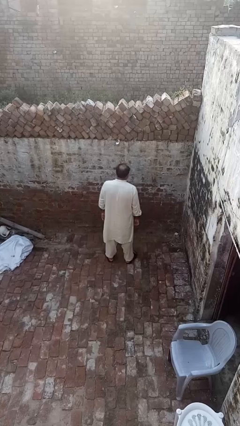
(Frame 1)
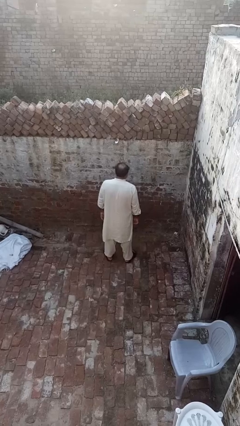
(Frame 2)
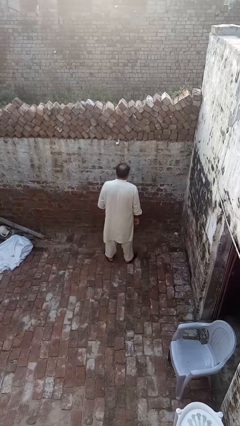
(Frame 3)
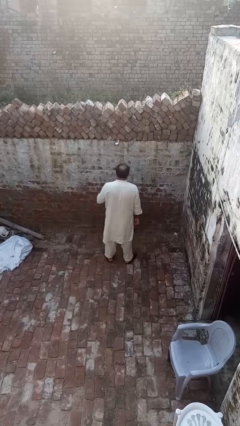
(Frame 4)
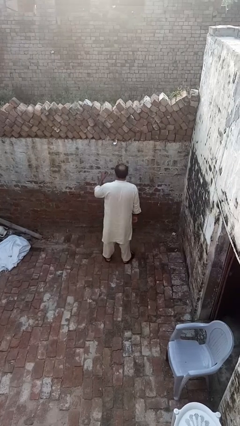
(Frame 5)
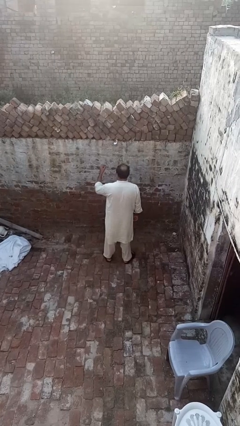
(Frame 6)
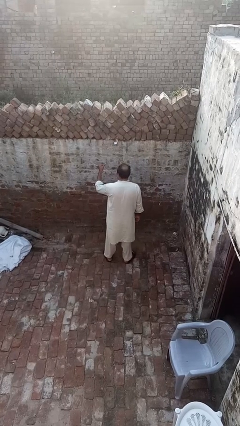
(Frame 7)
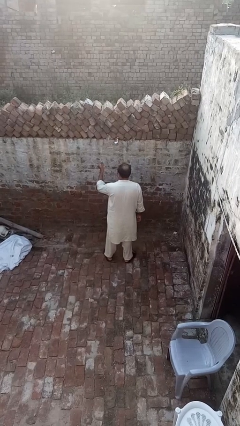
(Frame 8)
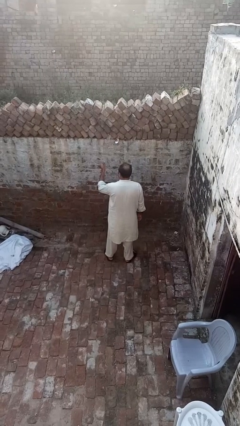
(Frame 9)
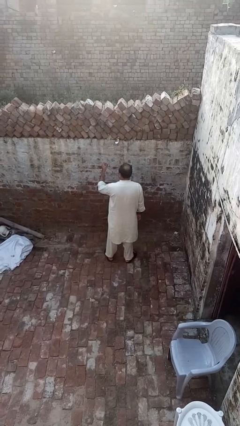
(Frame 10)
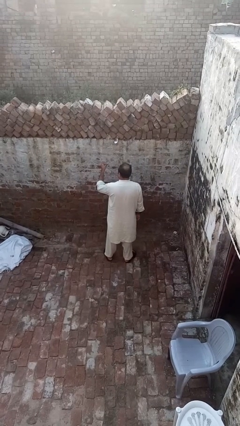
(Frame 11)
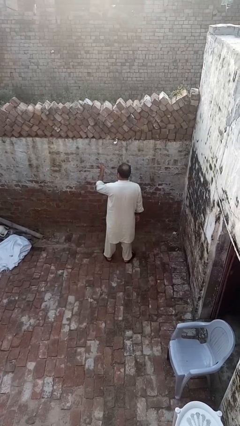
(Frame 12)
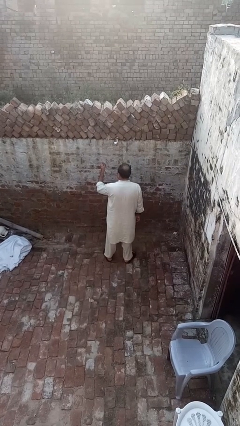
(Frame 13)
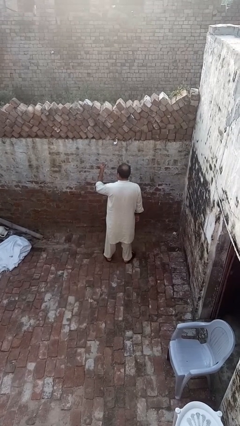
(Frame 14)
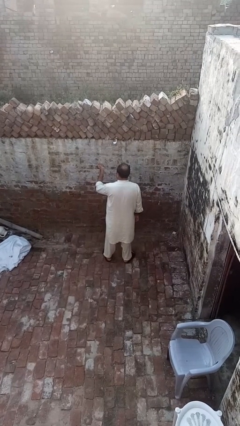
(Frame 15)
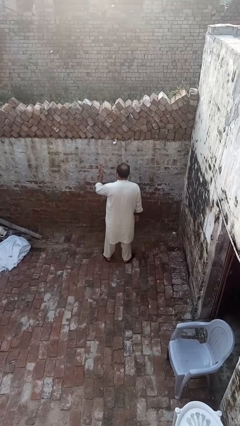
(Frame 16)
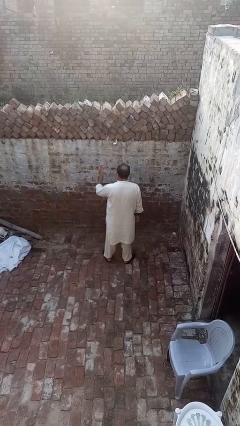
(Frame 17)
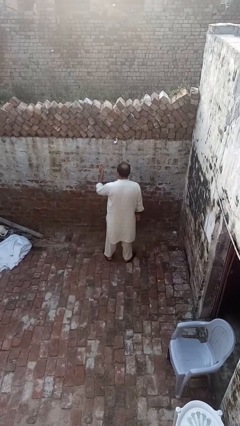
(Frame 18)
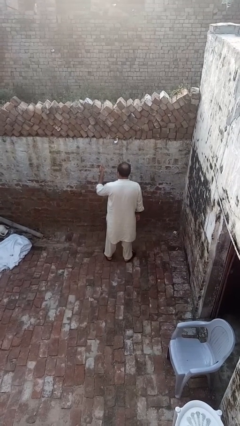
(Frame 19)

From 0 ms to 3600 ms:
person snaps fingers

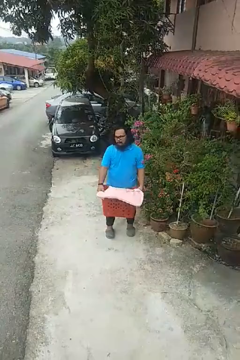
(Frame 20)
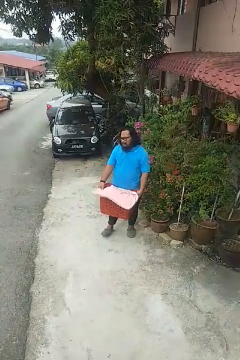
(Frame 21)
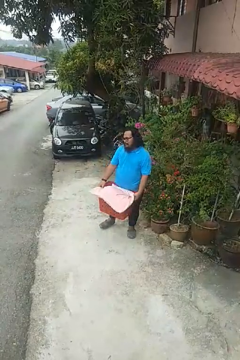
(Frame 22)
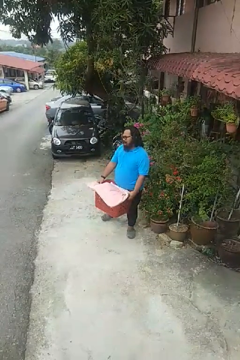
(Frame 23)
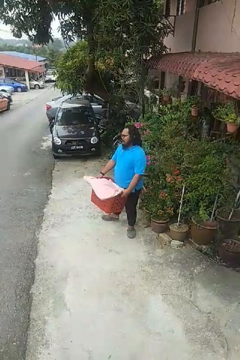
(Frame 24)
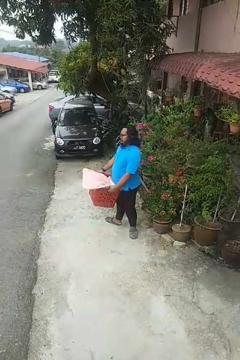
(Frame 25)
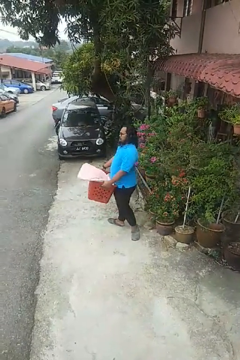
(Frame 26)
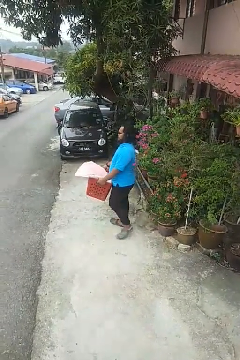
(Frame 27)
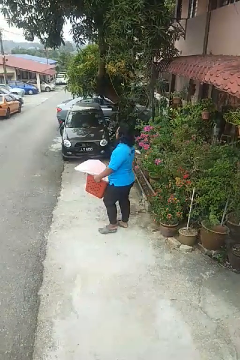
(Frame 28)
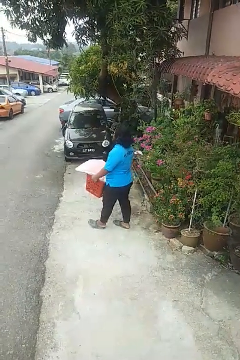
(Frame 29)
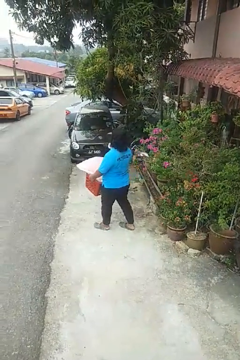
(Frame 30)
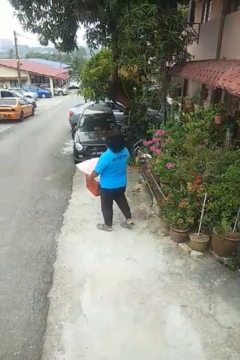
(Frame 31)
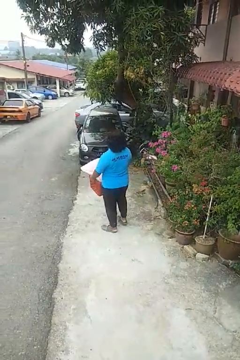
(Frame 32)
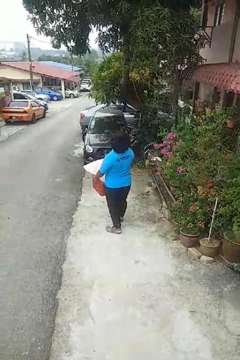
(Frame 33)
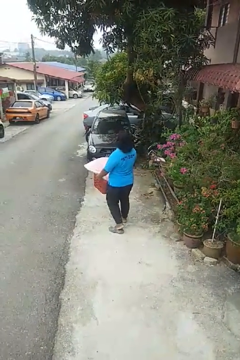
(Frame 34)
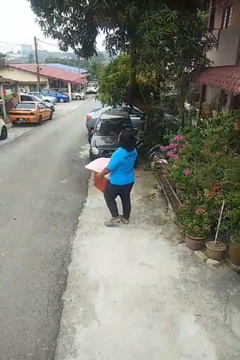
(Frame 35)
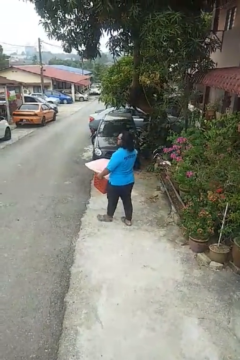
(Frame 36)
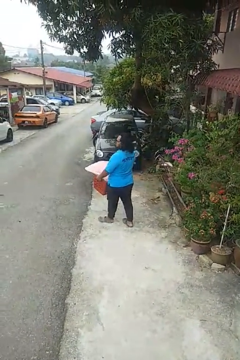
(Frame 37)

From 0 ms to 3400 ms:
person carries laundry basket

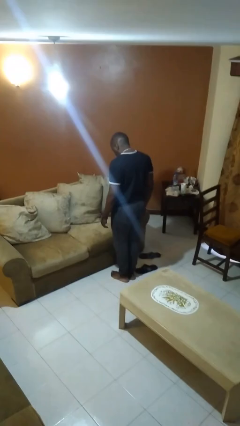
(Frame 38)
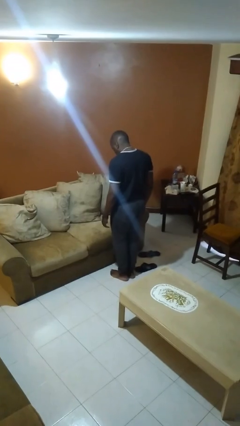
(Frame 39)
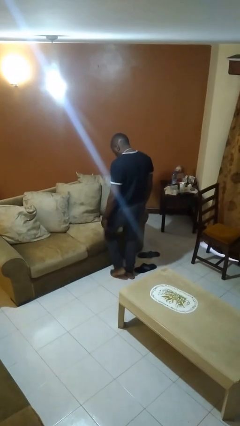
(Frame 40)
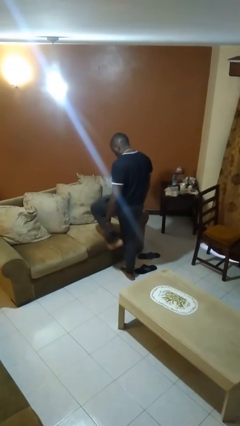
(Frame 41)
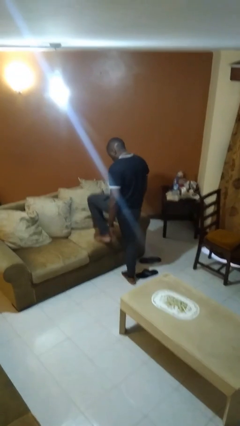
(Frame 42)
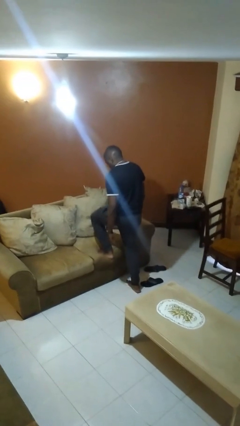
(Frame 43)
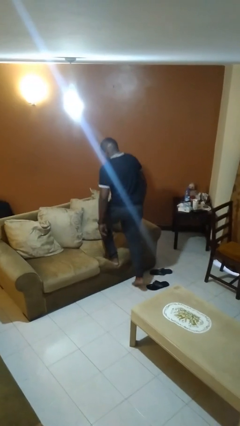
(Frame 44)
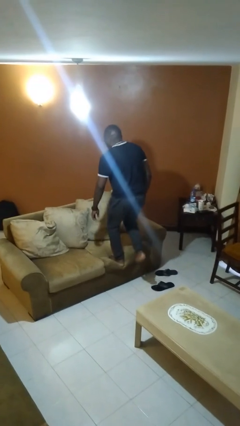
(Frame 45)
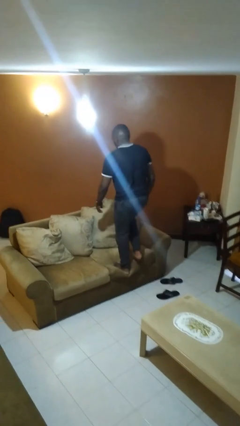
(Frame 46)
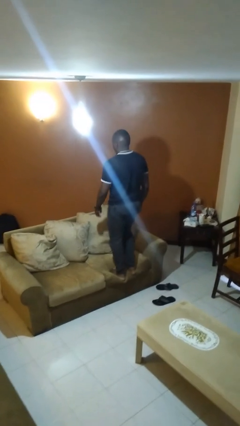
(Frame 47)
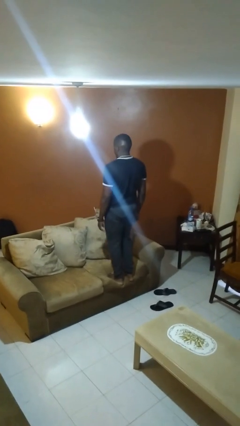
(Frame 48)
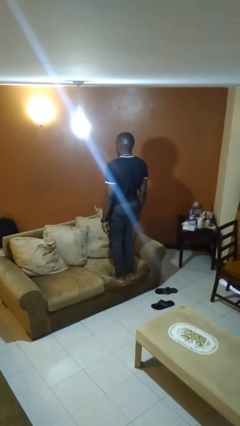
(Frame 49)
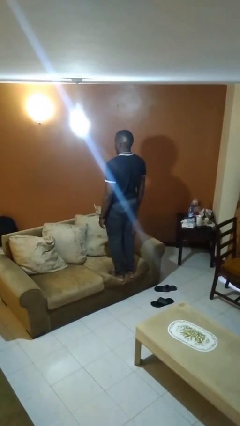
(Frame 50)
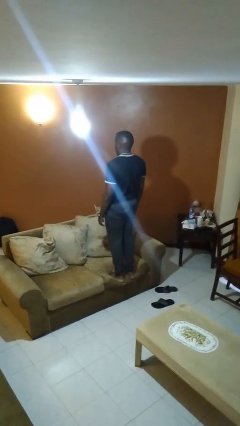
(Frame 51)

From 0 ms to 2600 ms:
person climbs on couch

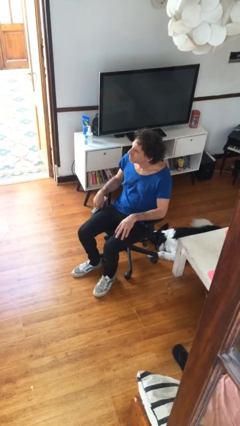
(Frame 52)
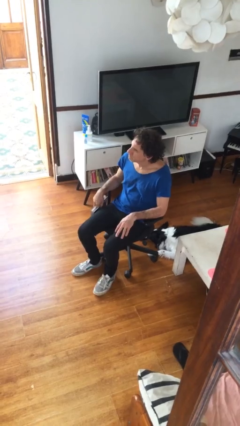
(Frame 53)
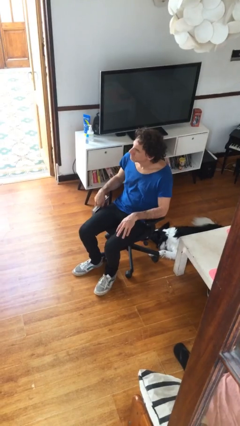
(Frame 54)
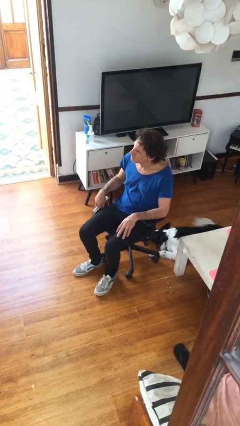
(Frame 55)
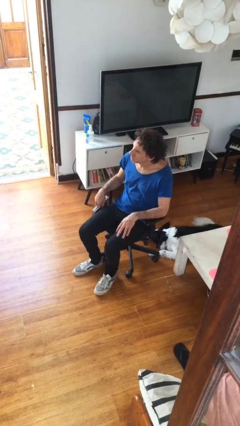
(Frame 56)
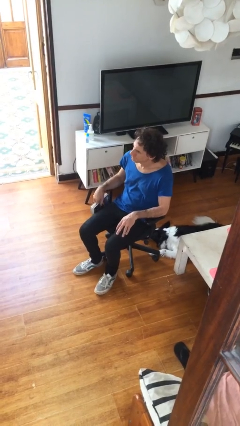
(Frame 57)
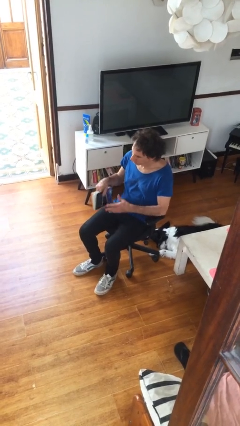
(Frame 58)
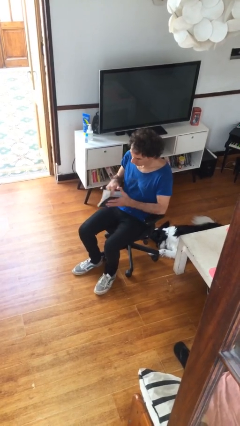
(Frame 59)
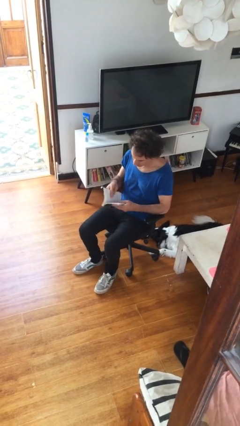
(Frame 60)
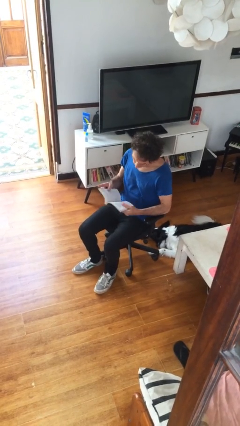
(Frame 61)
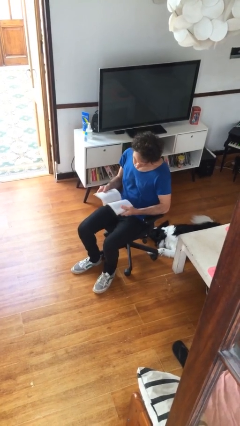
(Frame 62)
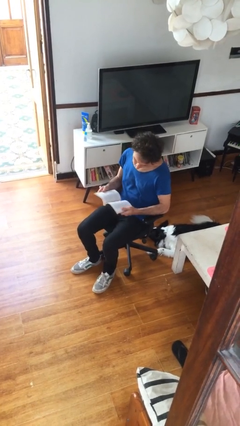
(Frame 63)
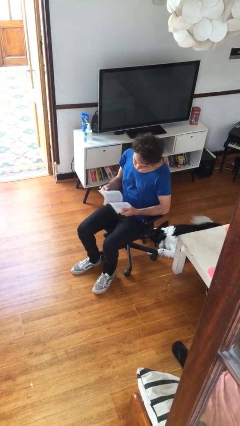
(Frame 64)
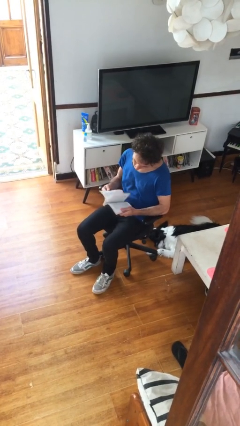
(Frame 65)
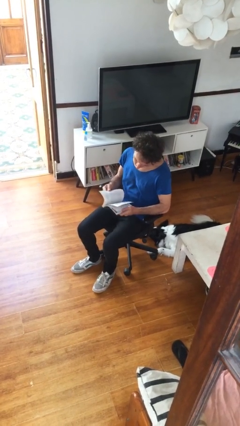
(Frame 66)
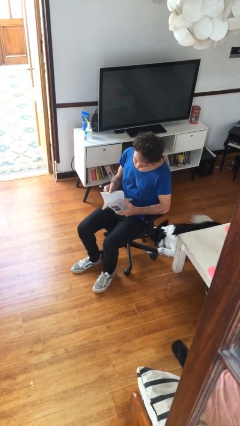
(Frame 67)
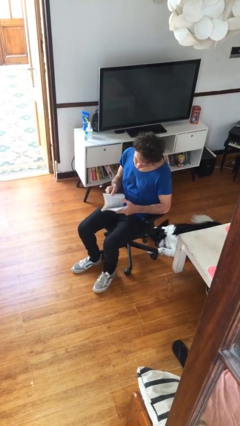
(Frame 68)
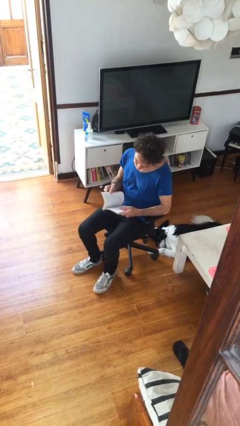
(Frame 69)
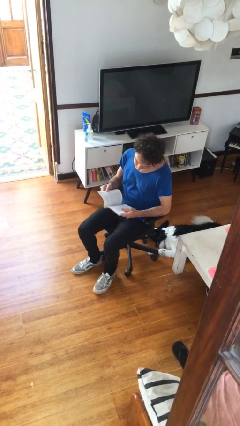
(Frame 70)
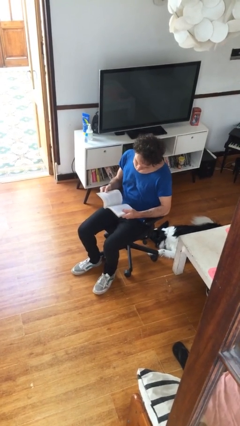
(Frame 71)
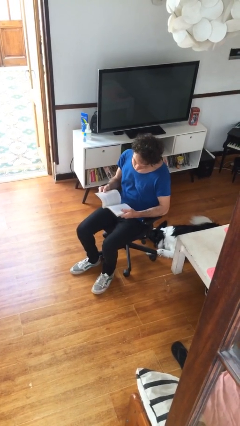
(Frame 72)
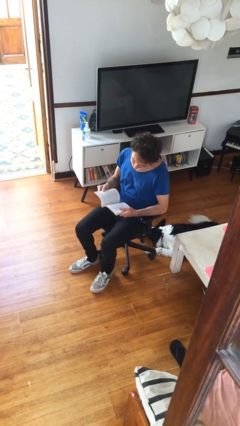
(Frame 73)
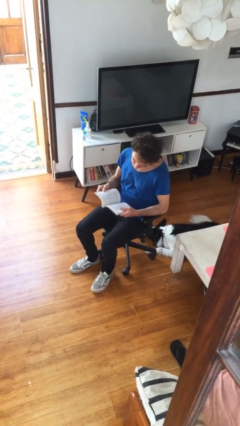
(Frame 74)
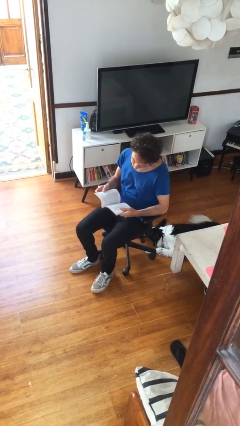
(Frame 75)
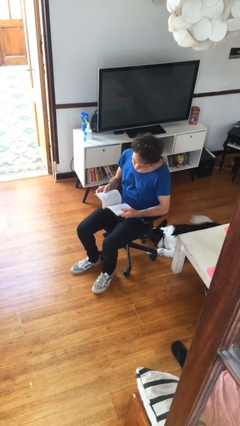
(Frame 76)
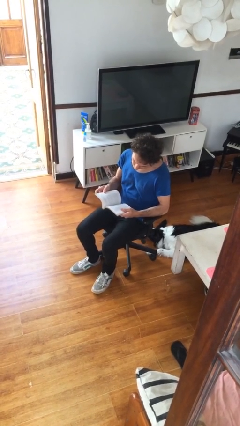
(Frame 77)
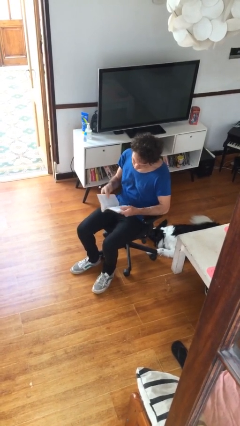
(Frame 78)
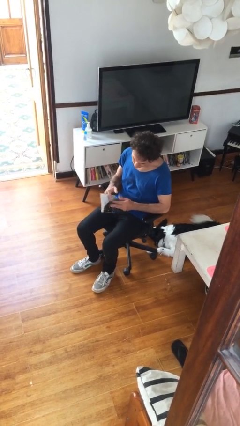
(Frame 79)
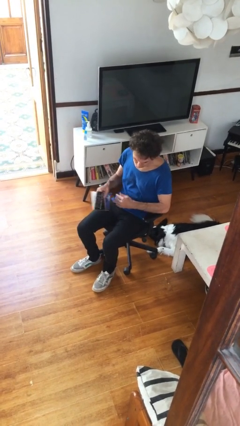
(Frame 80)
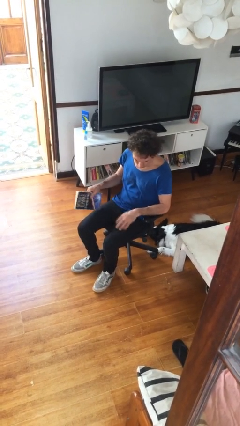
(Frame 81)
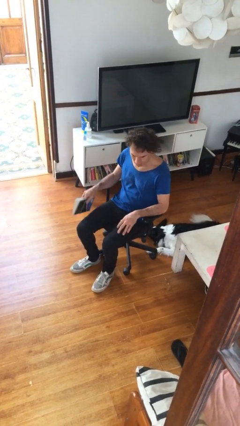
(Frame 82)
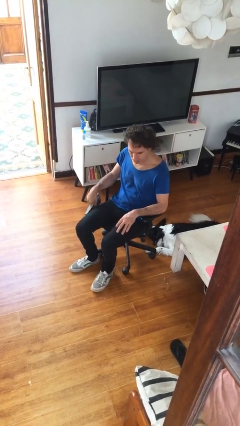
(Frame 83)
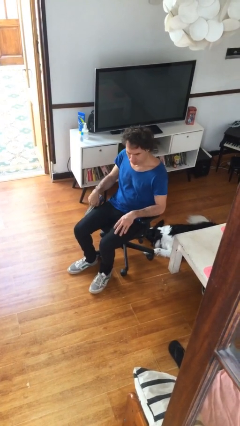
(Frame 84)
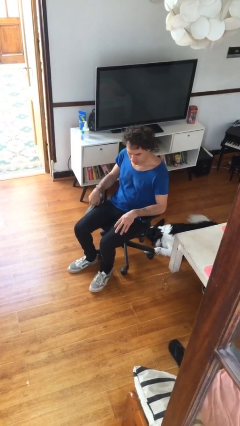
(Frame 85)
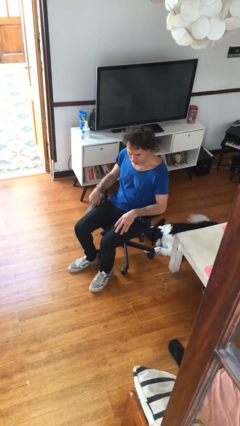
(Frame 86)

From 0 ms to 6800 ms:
person reads document

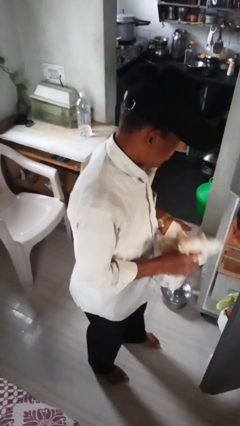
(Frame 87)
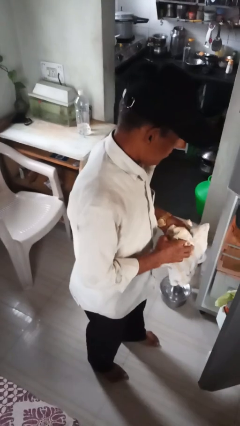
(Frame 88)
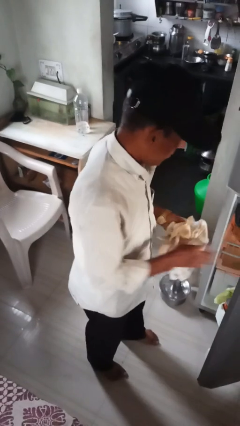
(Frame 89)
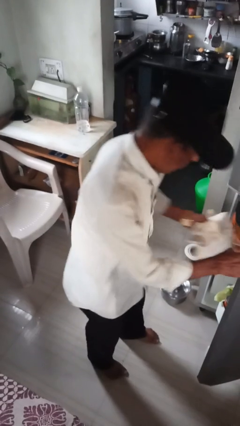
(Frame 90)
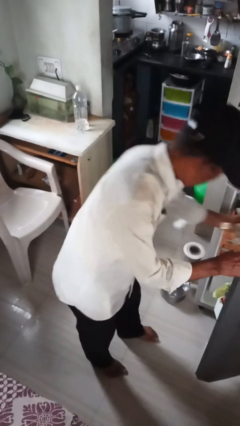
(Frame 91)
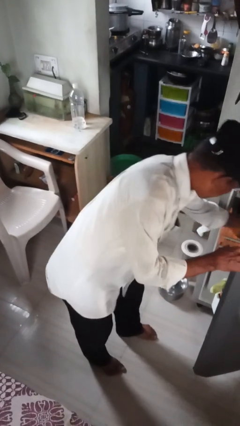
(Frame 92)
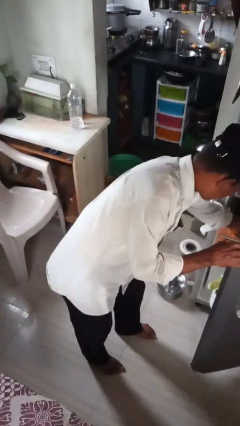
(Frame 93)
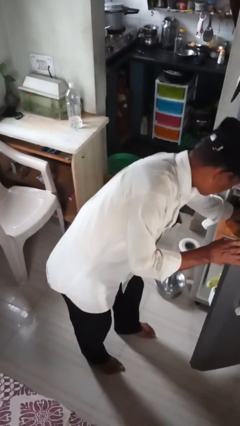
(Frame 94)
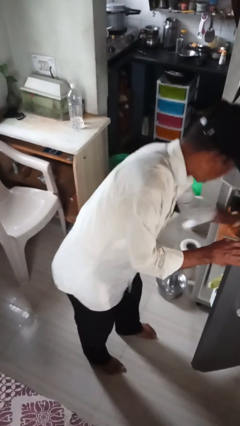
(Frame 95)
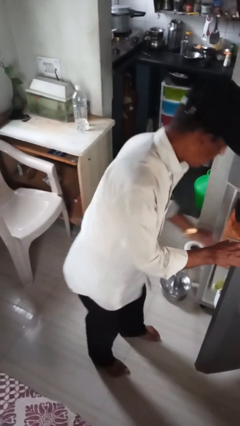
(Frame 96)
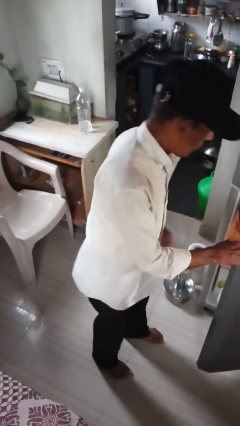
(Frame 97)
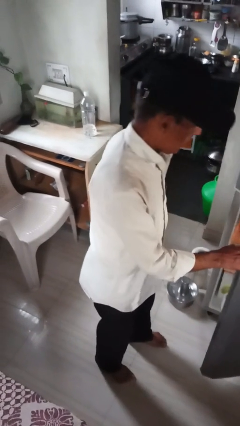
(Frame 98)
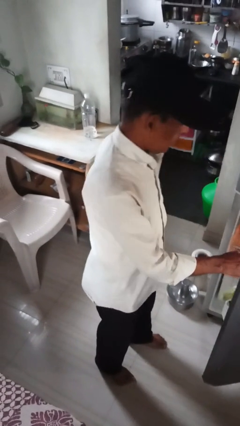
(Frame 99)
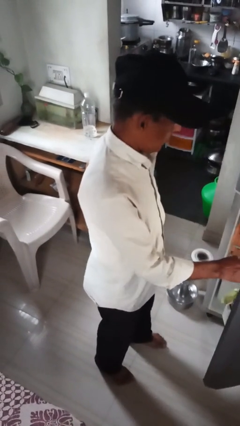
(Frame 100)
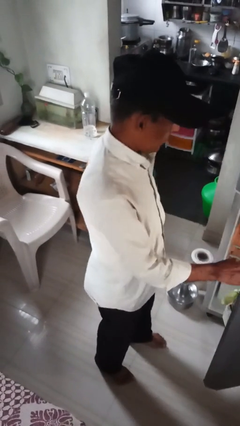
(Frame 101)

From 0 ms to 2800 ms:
person loads clotheswasher
